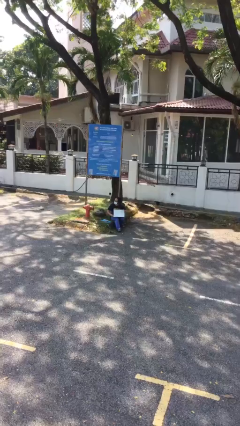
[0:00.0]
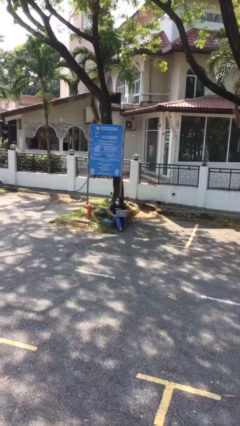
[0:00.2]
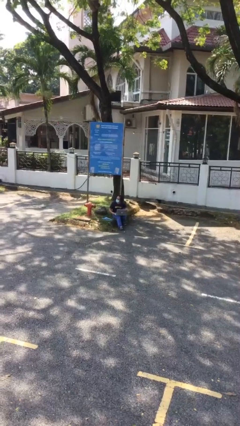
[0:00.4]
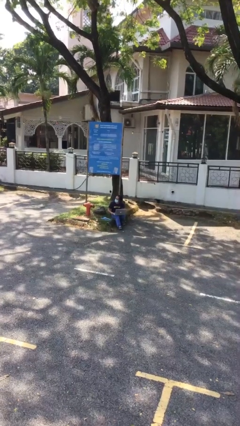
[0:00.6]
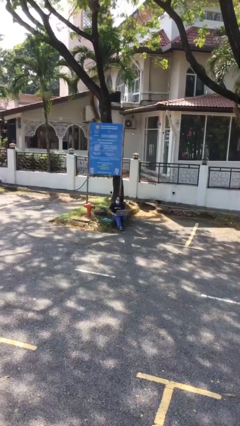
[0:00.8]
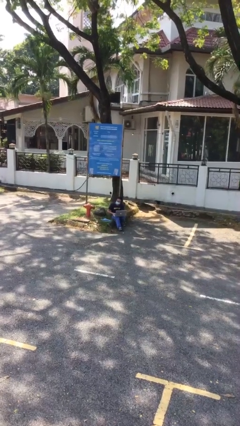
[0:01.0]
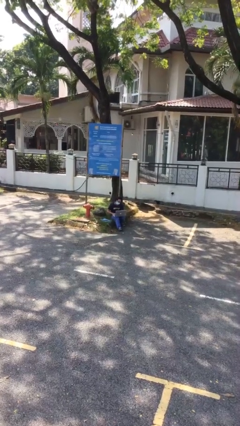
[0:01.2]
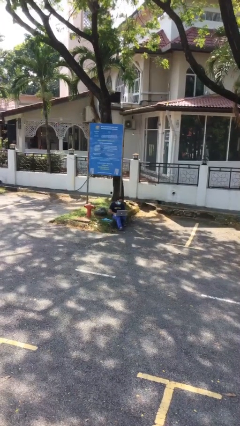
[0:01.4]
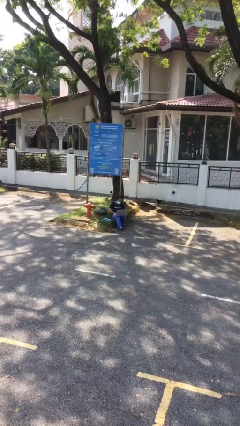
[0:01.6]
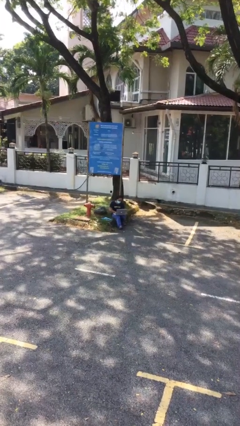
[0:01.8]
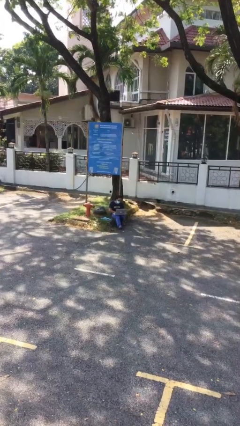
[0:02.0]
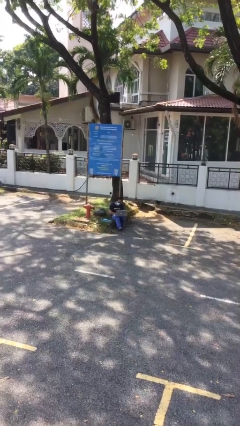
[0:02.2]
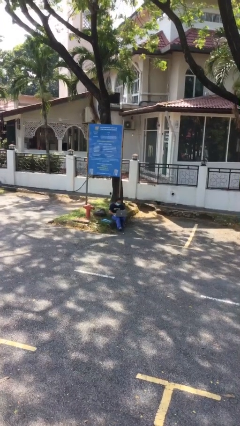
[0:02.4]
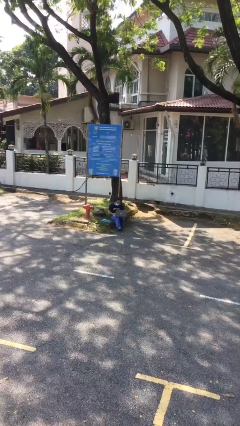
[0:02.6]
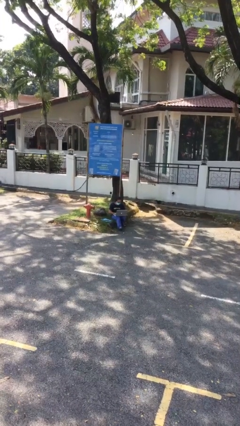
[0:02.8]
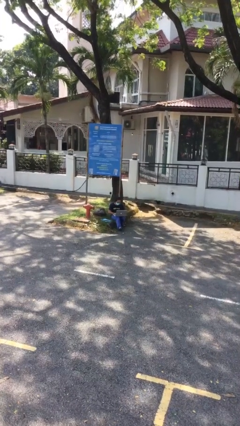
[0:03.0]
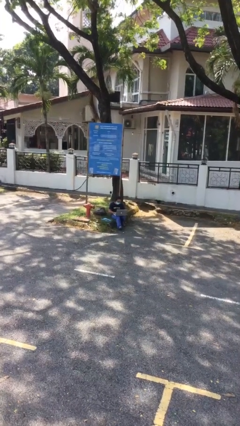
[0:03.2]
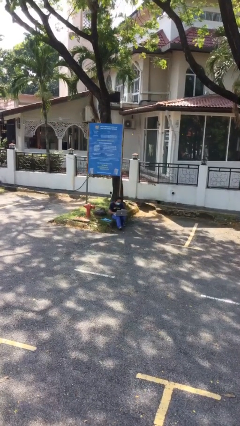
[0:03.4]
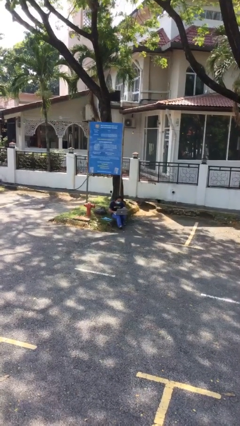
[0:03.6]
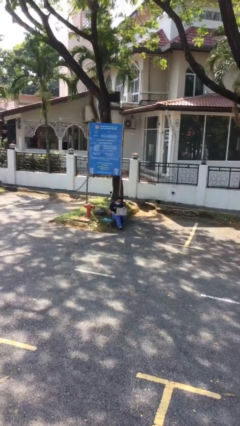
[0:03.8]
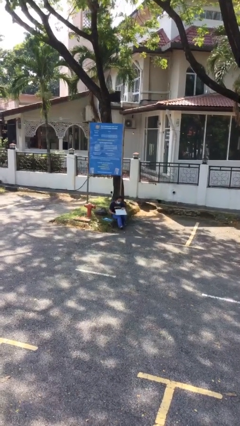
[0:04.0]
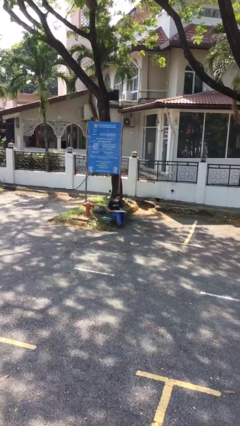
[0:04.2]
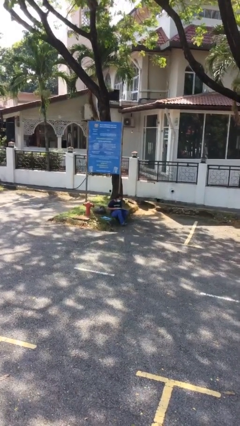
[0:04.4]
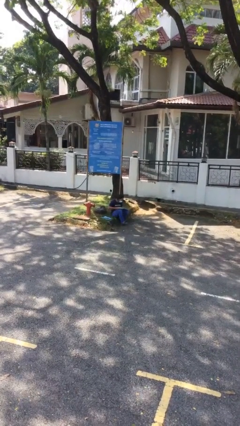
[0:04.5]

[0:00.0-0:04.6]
person interacts with laptop

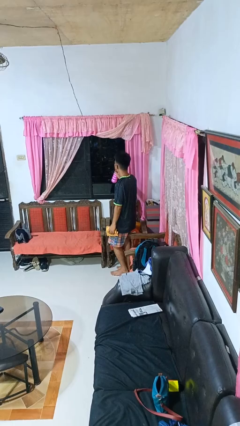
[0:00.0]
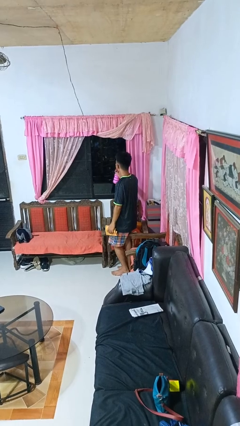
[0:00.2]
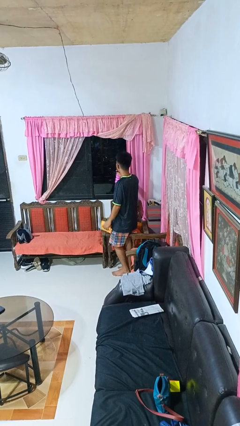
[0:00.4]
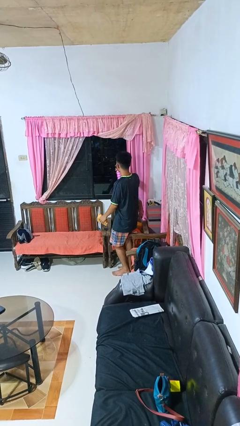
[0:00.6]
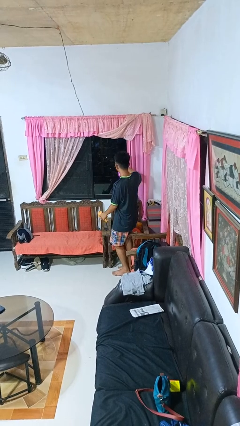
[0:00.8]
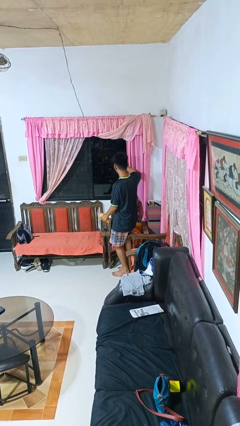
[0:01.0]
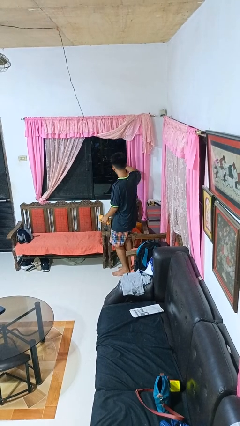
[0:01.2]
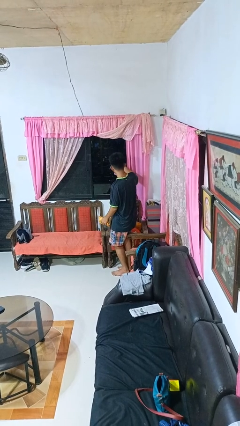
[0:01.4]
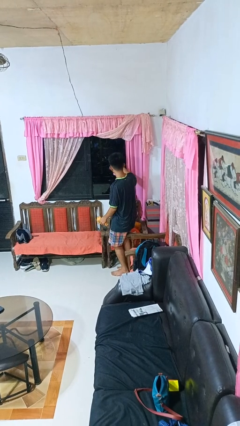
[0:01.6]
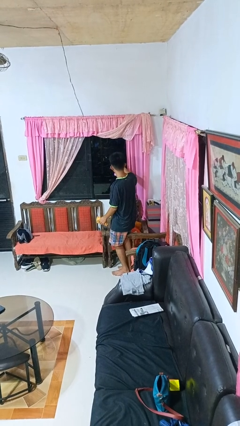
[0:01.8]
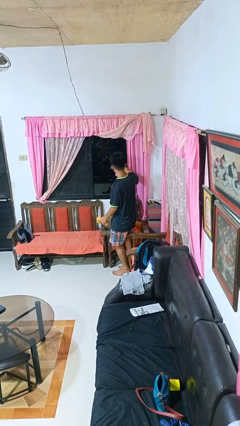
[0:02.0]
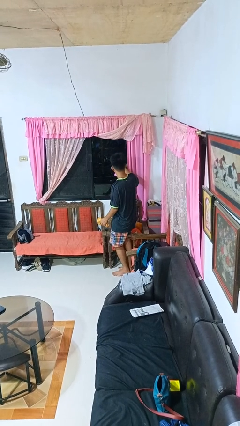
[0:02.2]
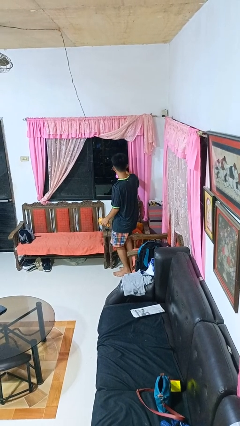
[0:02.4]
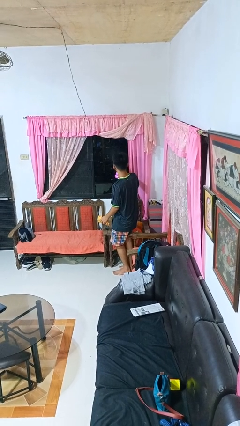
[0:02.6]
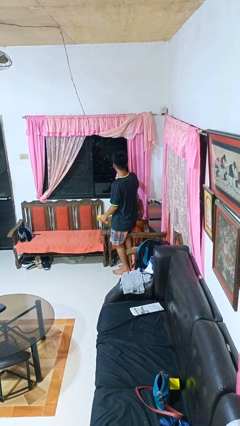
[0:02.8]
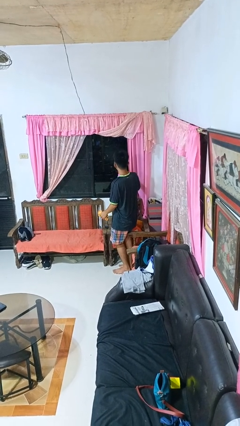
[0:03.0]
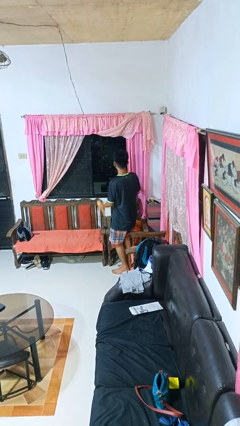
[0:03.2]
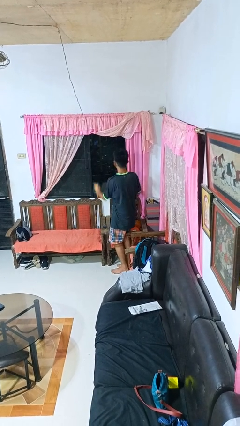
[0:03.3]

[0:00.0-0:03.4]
person sprays from bottle

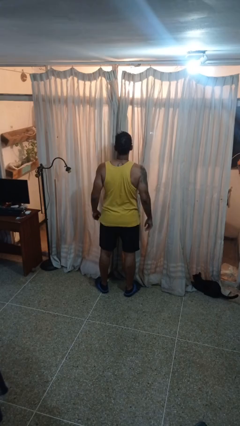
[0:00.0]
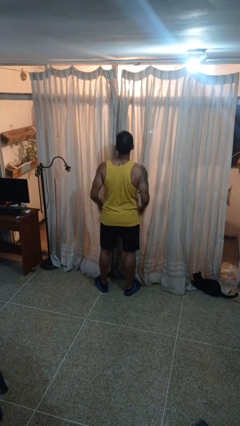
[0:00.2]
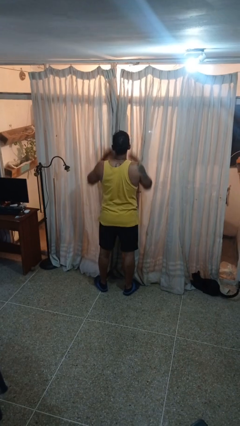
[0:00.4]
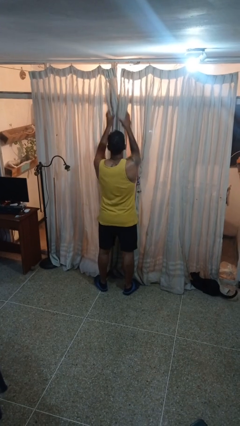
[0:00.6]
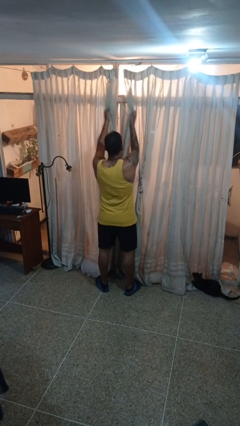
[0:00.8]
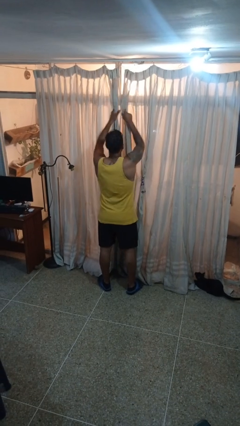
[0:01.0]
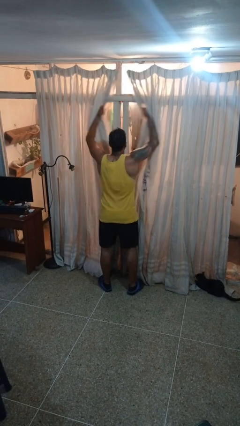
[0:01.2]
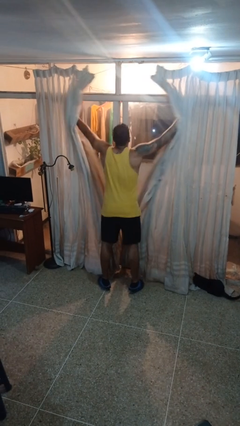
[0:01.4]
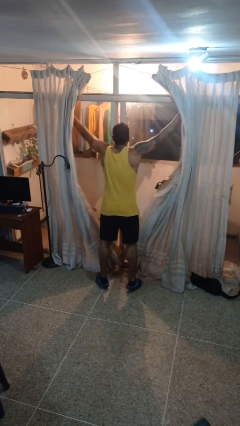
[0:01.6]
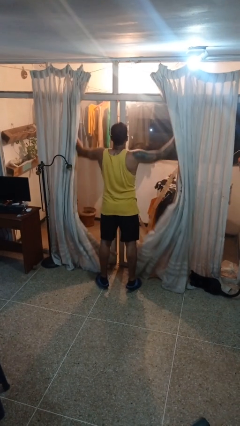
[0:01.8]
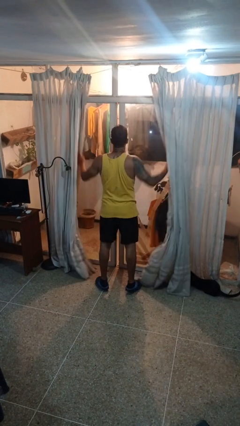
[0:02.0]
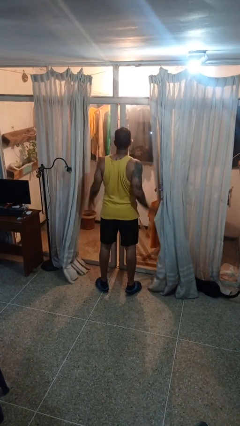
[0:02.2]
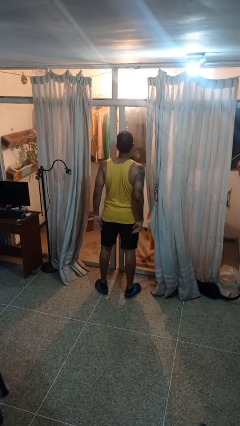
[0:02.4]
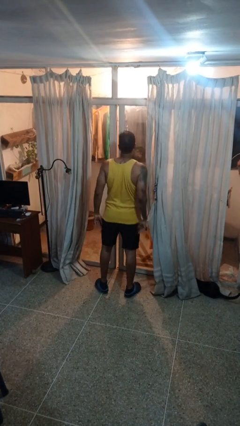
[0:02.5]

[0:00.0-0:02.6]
person opens curtains

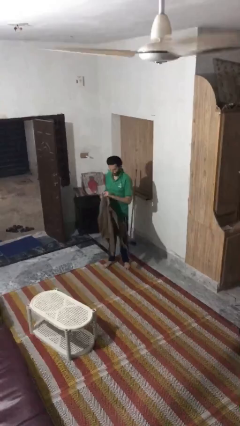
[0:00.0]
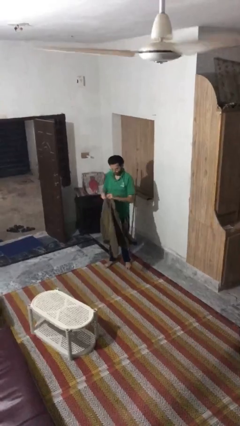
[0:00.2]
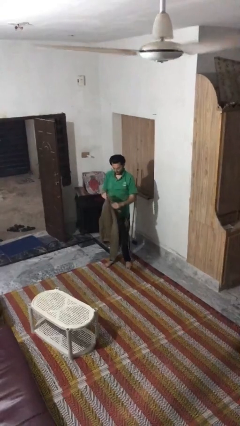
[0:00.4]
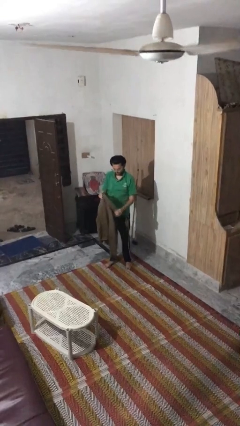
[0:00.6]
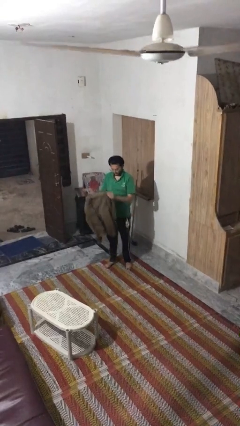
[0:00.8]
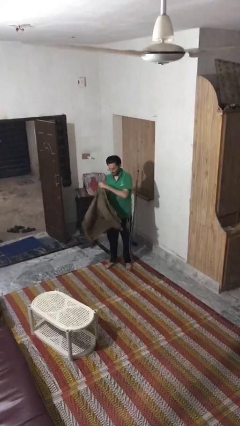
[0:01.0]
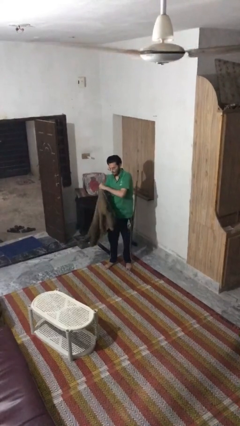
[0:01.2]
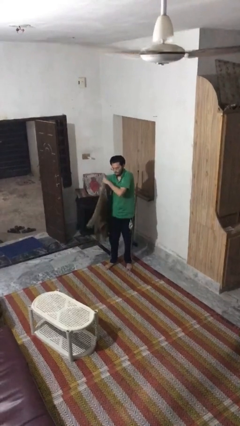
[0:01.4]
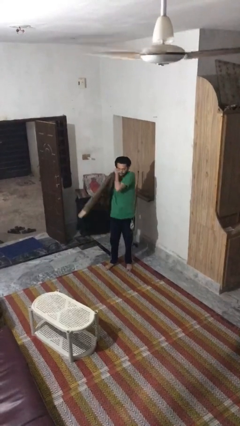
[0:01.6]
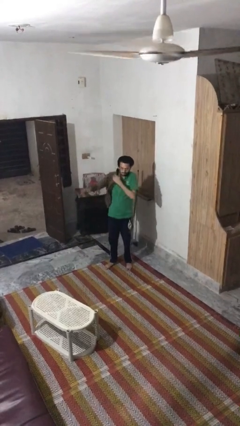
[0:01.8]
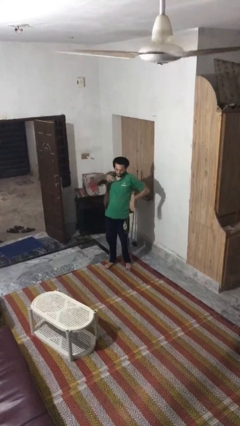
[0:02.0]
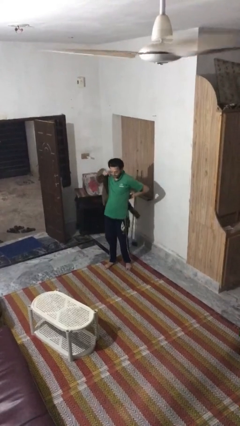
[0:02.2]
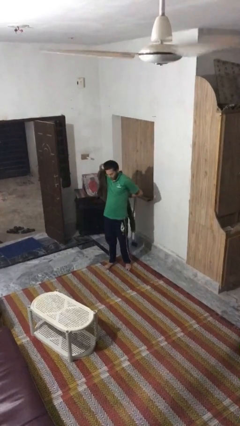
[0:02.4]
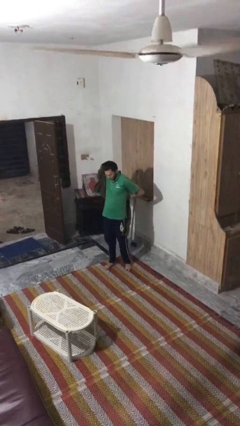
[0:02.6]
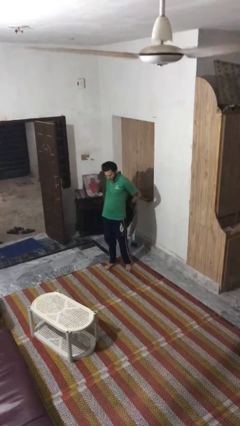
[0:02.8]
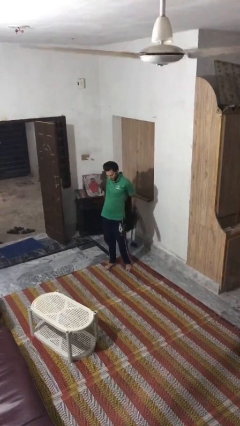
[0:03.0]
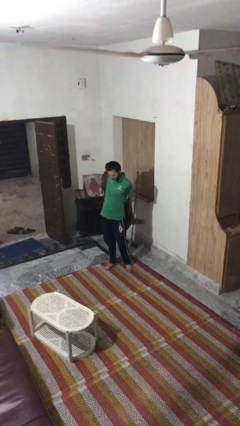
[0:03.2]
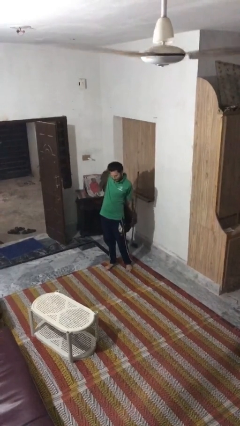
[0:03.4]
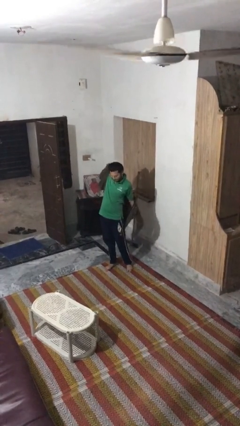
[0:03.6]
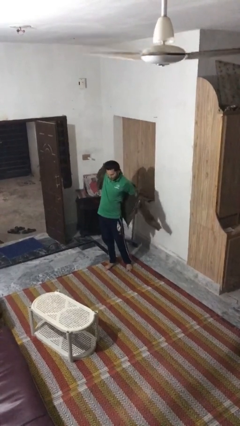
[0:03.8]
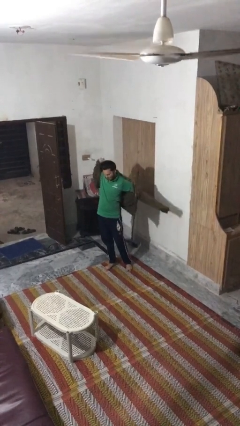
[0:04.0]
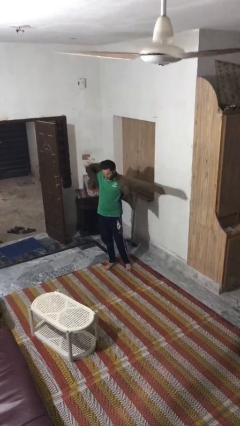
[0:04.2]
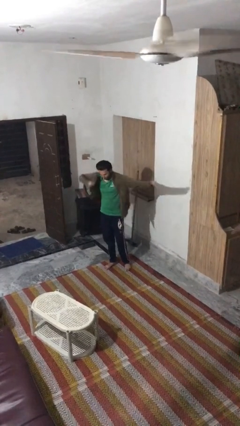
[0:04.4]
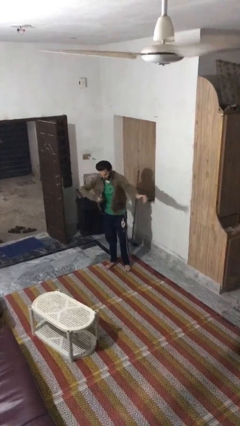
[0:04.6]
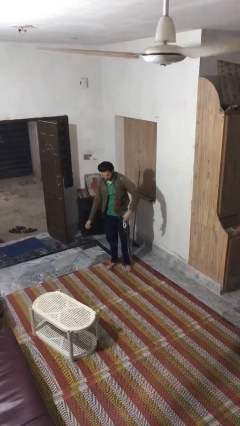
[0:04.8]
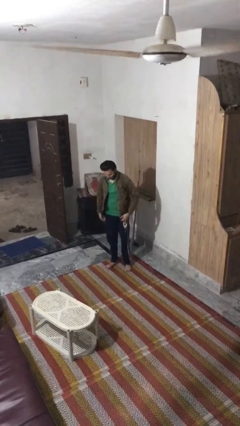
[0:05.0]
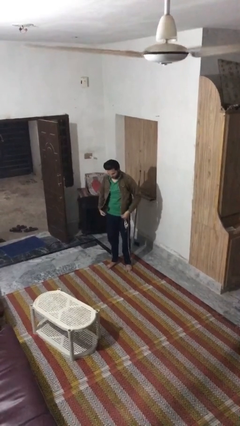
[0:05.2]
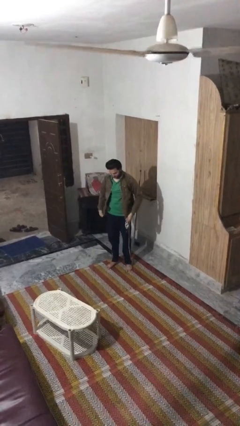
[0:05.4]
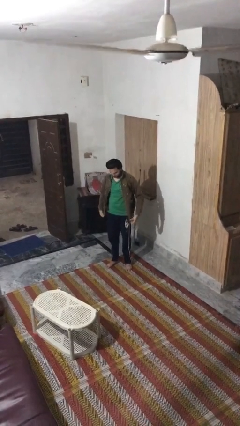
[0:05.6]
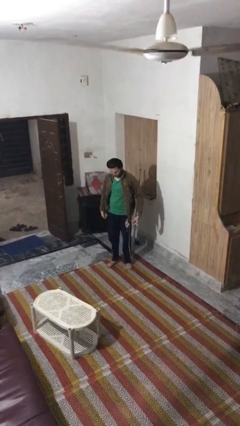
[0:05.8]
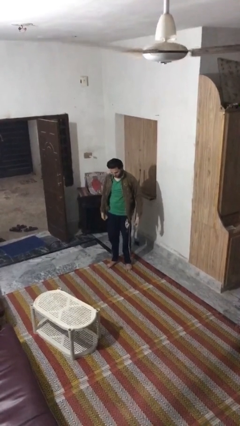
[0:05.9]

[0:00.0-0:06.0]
person puts on jacket

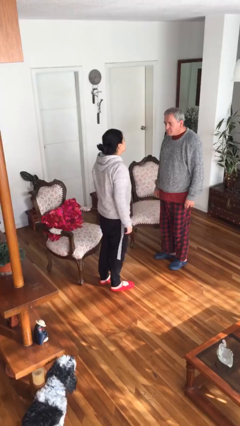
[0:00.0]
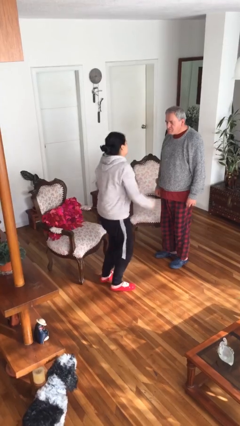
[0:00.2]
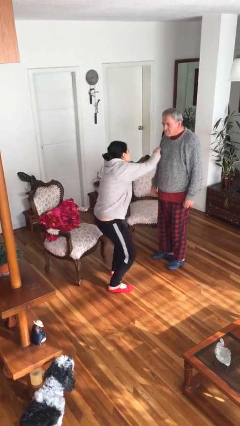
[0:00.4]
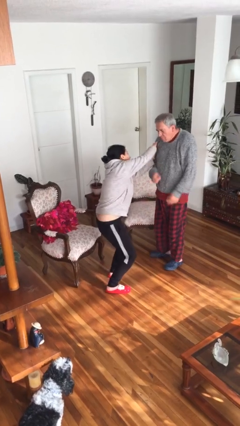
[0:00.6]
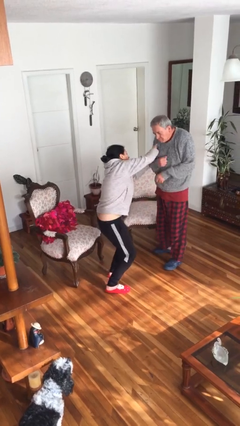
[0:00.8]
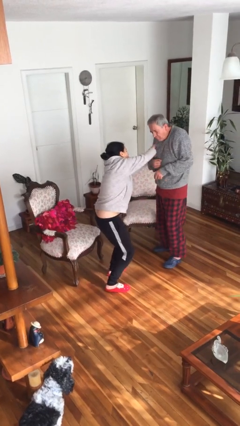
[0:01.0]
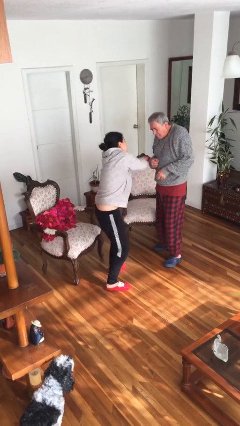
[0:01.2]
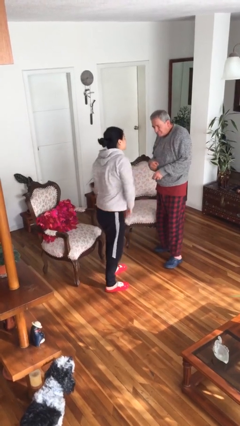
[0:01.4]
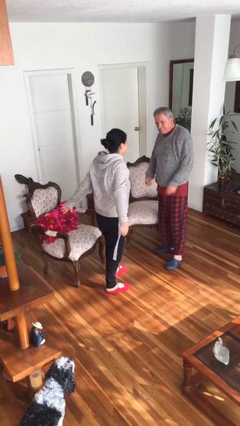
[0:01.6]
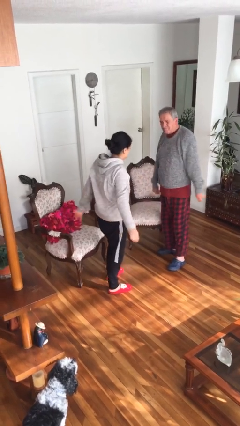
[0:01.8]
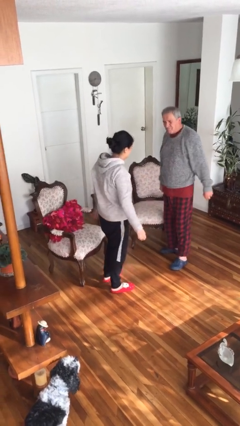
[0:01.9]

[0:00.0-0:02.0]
person tickles person
